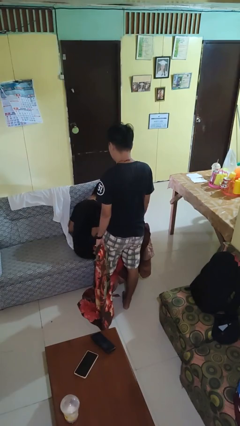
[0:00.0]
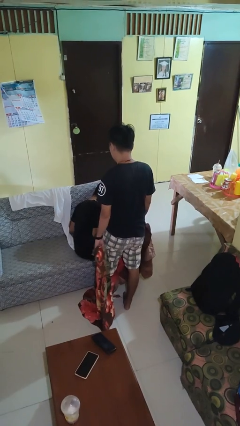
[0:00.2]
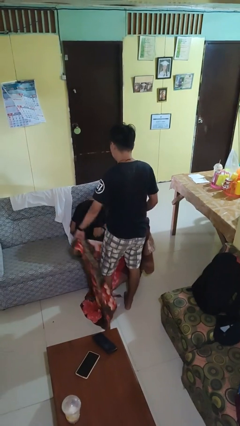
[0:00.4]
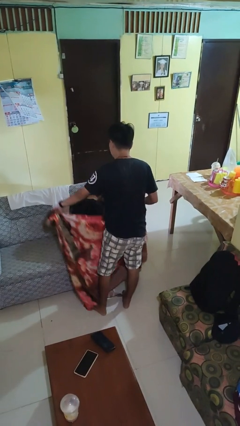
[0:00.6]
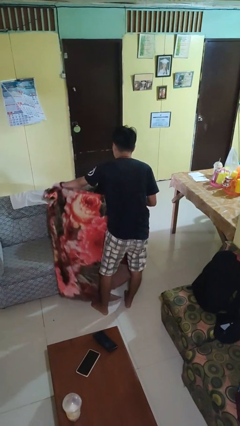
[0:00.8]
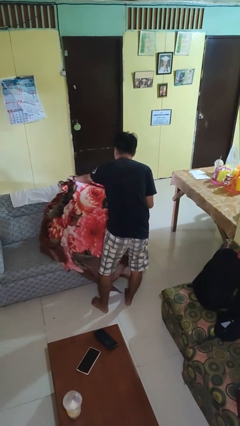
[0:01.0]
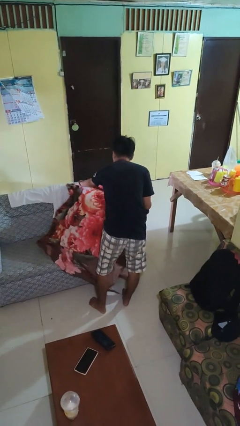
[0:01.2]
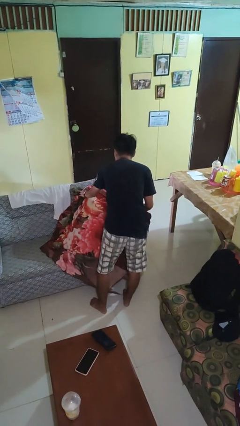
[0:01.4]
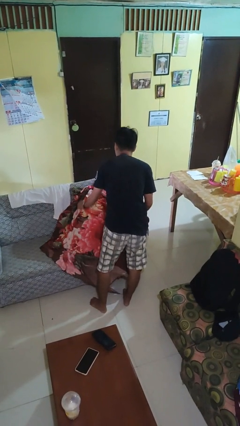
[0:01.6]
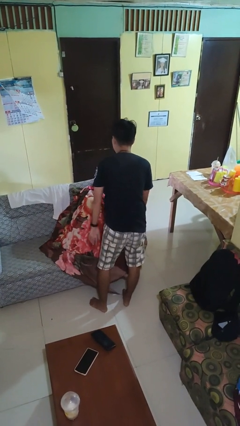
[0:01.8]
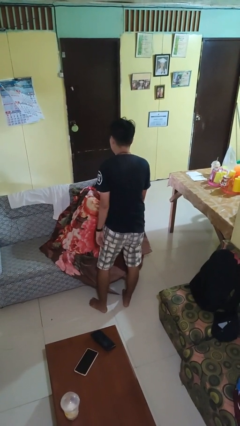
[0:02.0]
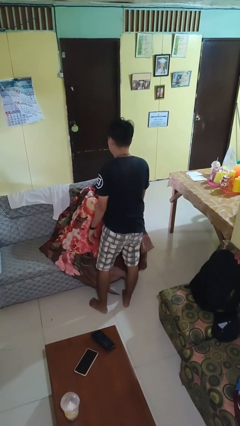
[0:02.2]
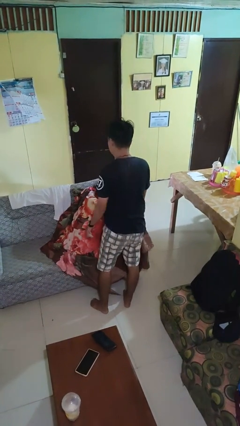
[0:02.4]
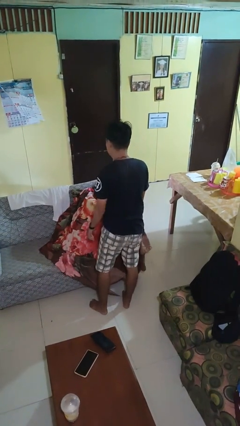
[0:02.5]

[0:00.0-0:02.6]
person covers friend with blanket

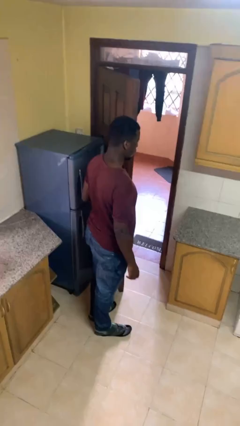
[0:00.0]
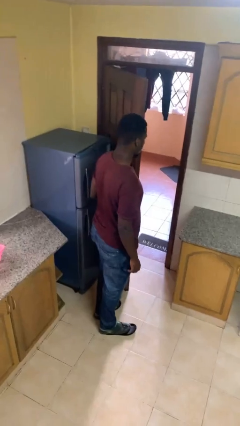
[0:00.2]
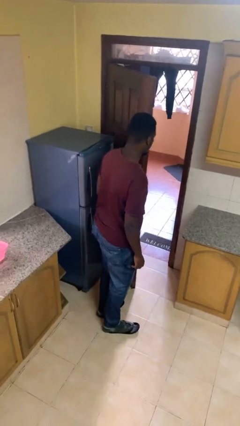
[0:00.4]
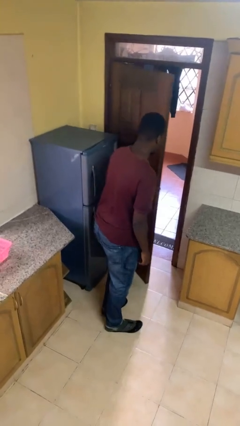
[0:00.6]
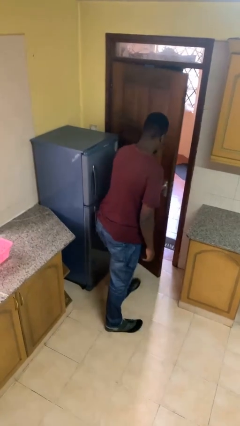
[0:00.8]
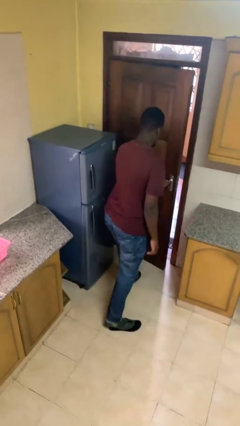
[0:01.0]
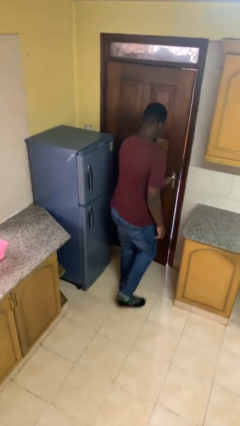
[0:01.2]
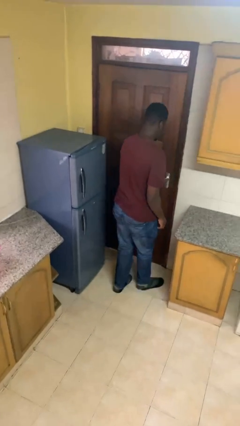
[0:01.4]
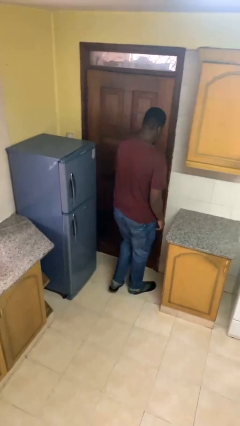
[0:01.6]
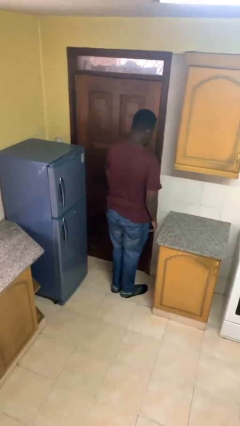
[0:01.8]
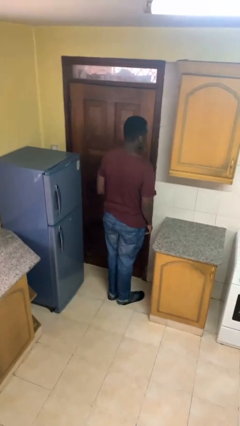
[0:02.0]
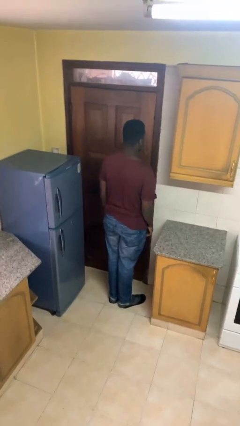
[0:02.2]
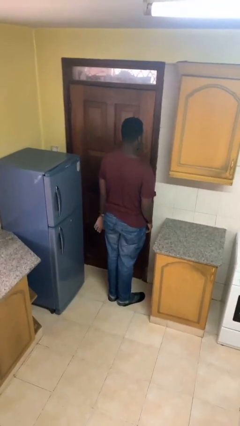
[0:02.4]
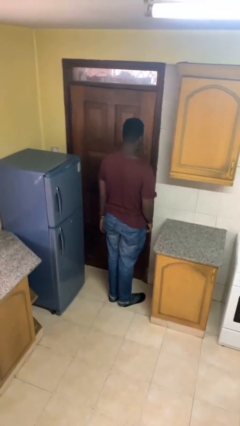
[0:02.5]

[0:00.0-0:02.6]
person closes facility door

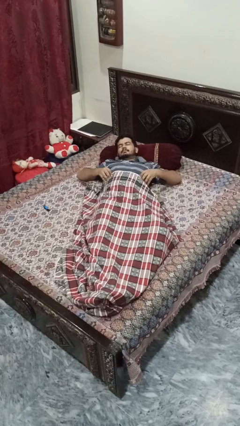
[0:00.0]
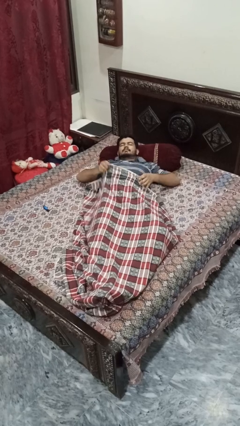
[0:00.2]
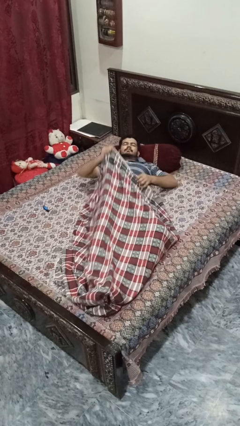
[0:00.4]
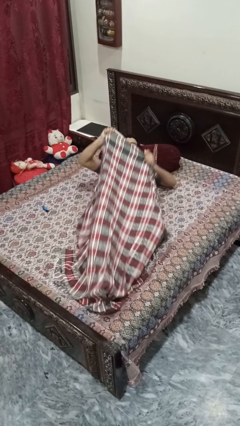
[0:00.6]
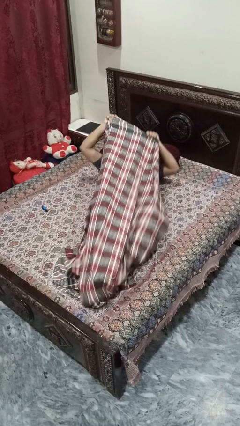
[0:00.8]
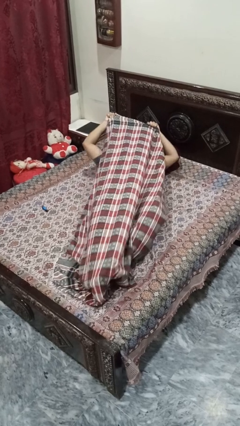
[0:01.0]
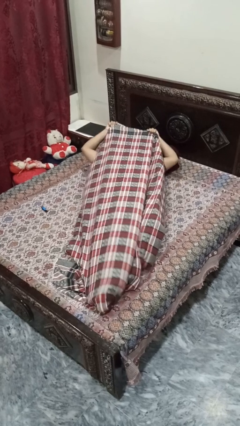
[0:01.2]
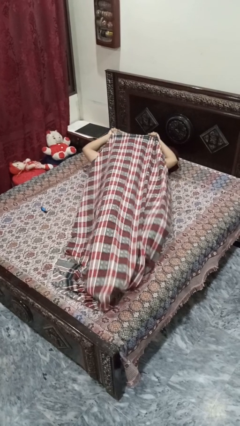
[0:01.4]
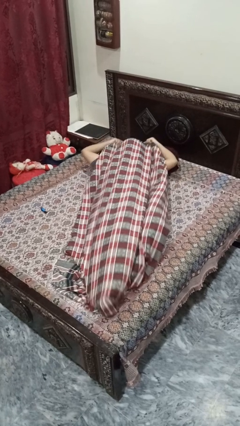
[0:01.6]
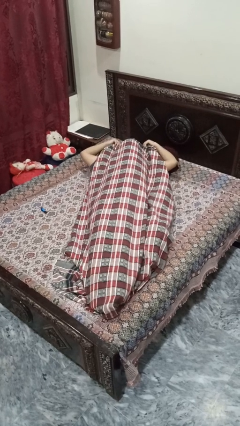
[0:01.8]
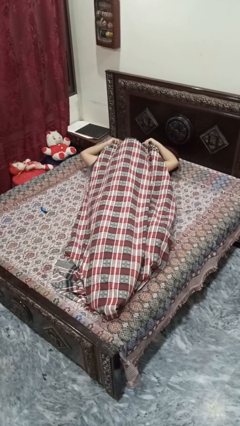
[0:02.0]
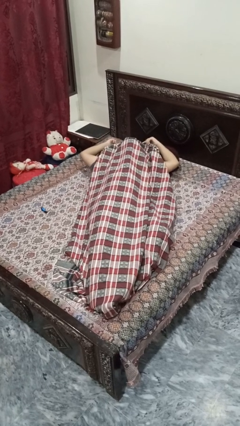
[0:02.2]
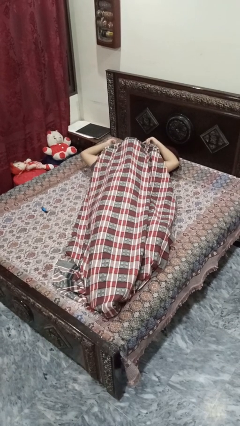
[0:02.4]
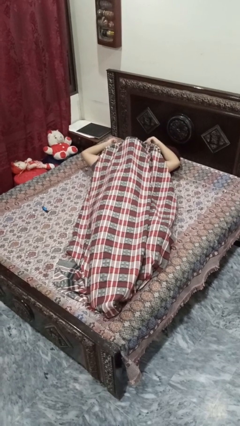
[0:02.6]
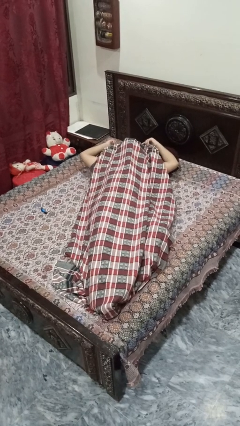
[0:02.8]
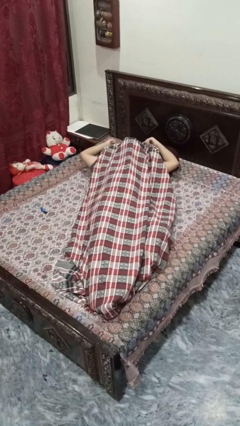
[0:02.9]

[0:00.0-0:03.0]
person covers with bedsheets

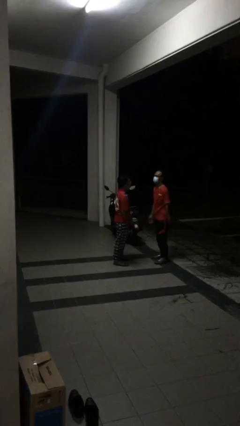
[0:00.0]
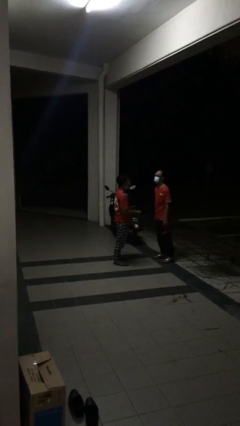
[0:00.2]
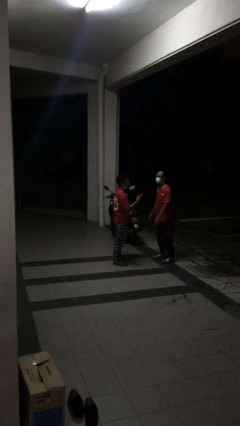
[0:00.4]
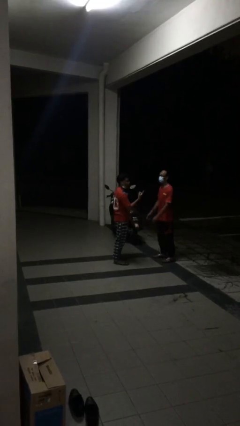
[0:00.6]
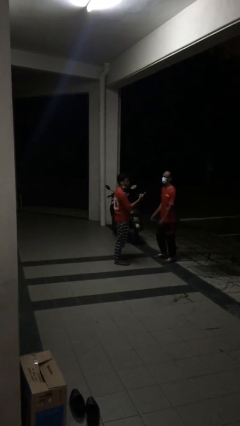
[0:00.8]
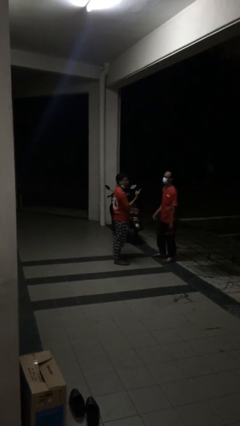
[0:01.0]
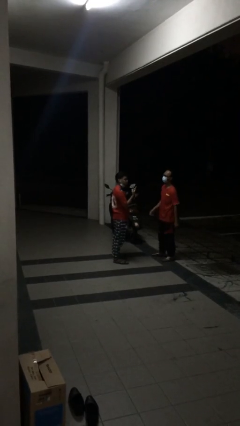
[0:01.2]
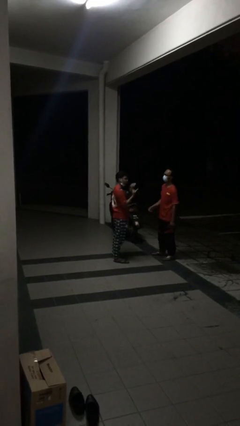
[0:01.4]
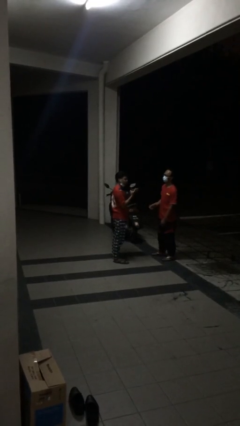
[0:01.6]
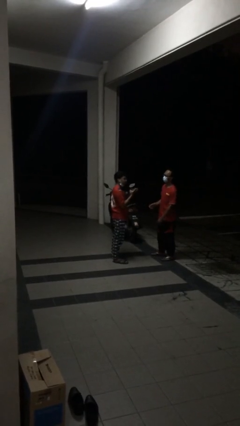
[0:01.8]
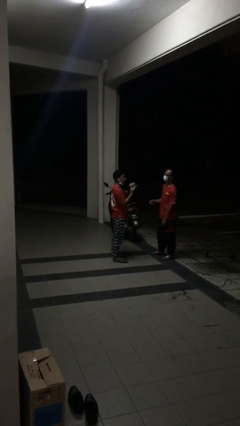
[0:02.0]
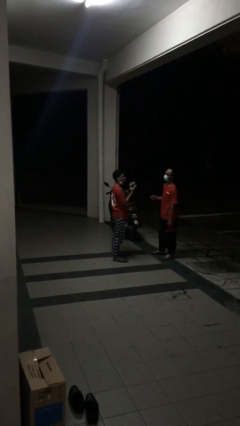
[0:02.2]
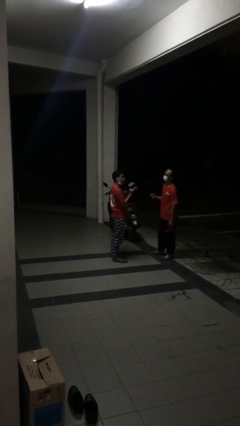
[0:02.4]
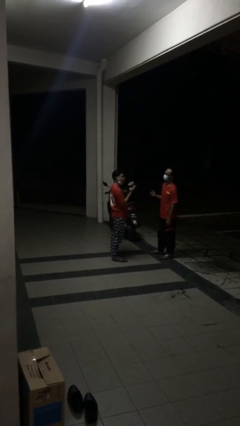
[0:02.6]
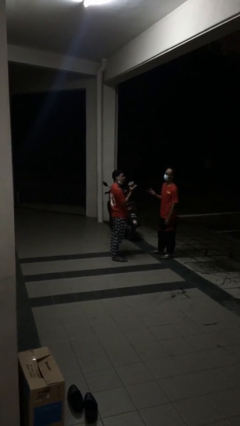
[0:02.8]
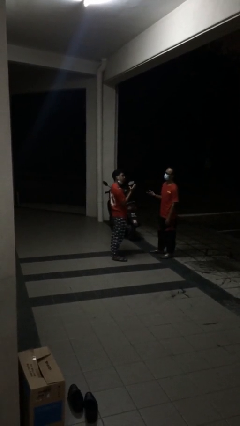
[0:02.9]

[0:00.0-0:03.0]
person talks to person

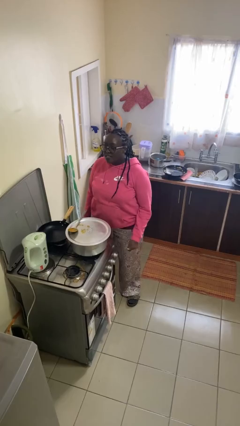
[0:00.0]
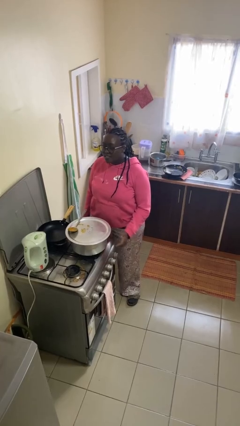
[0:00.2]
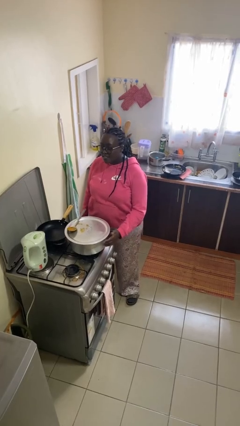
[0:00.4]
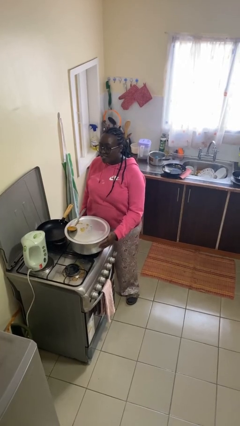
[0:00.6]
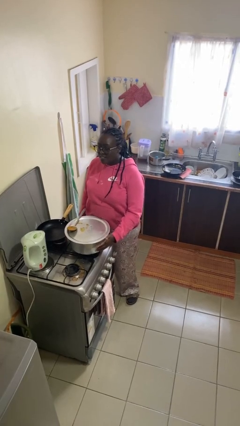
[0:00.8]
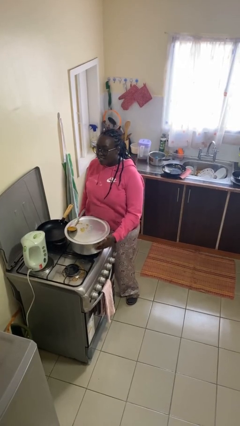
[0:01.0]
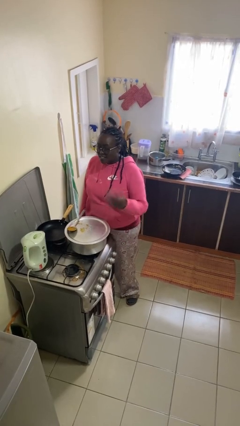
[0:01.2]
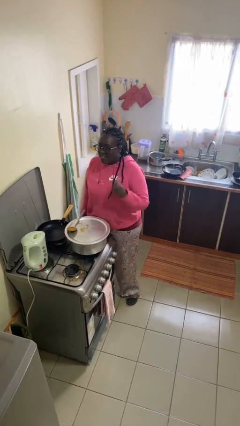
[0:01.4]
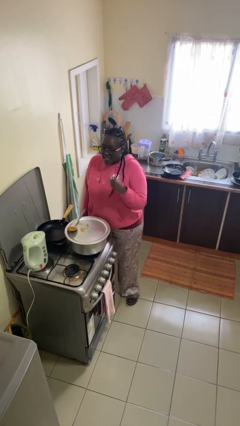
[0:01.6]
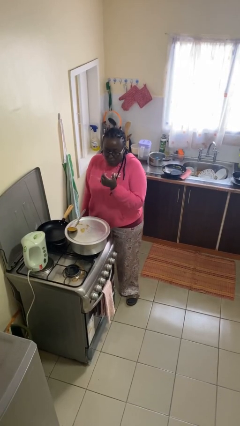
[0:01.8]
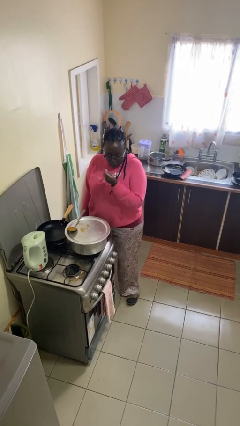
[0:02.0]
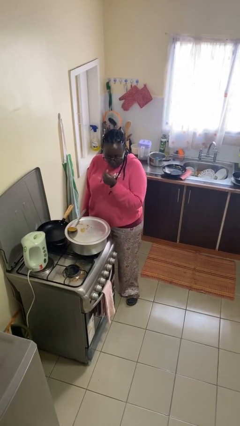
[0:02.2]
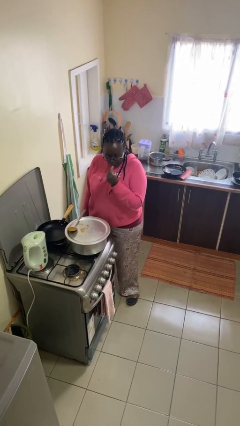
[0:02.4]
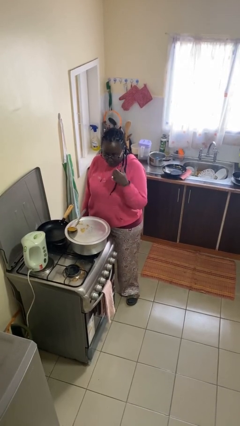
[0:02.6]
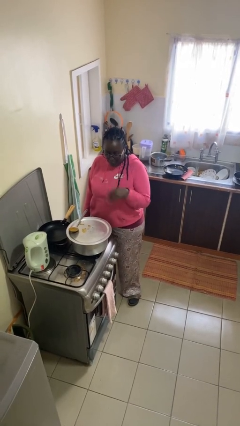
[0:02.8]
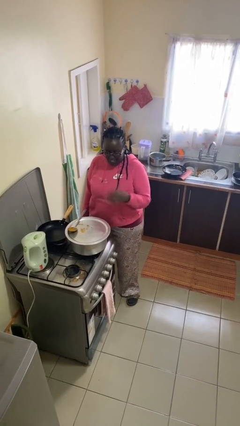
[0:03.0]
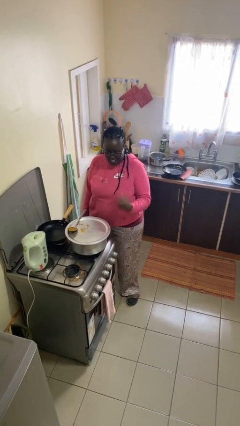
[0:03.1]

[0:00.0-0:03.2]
person burns hand

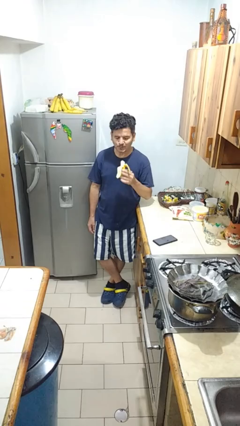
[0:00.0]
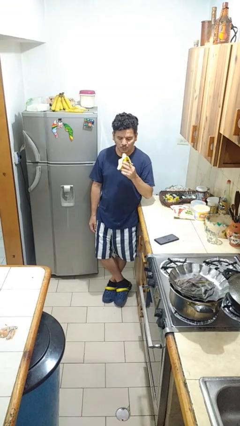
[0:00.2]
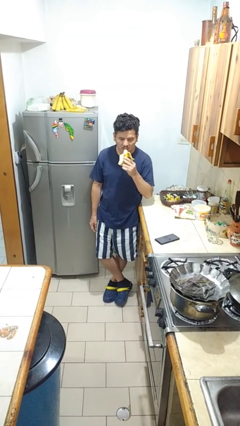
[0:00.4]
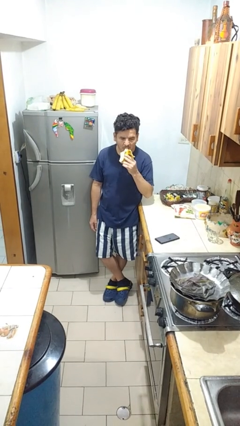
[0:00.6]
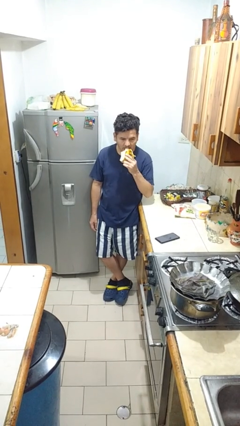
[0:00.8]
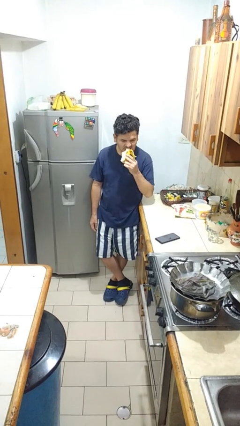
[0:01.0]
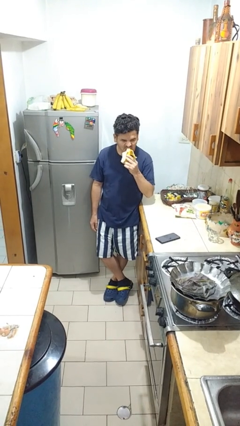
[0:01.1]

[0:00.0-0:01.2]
person eats banana

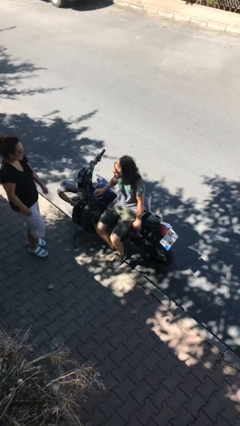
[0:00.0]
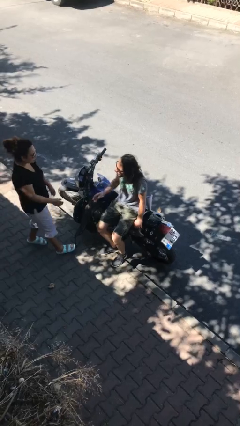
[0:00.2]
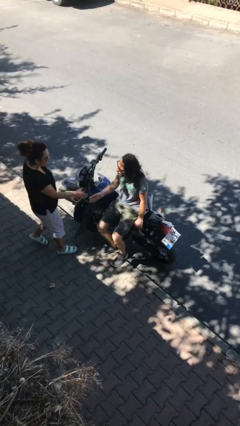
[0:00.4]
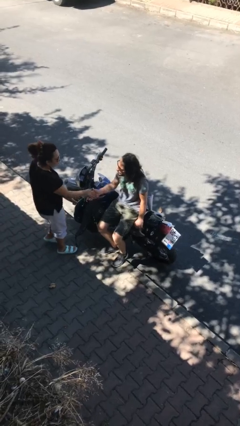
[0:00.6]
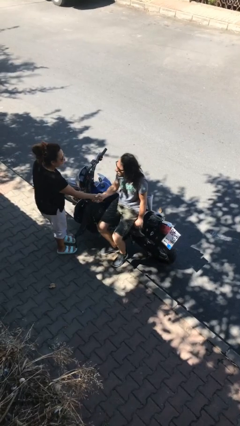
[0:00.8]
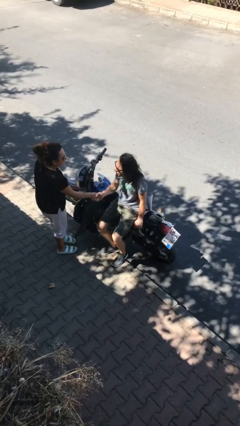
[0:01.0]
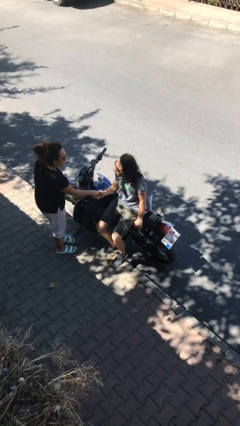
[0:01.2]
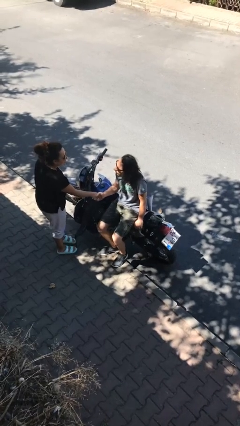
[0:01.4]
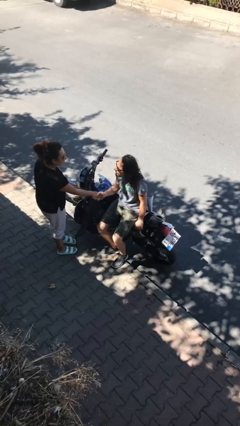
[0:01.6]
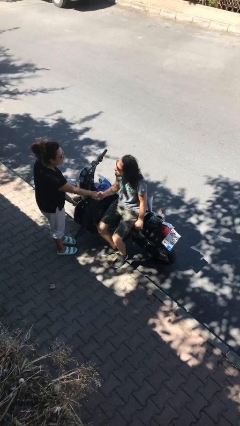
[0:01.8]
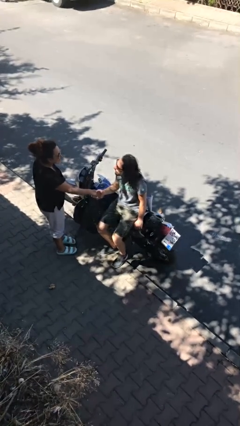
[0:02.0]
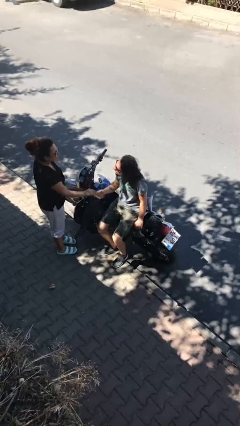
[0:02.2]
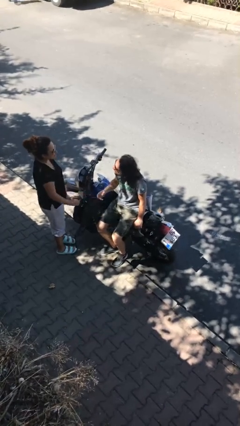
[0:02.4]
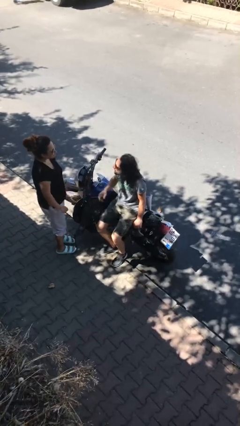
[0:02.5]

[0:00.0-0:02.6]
person shakes hand
